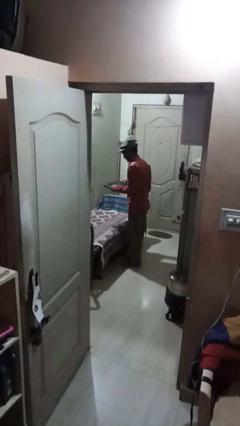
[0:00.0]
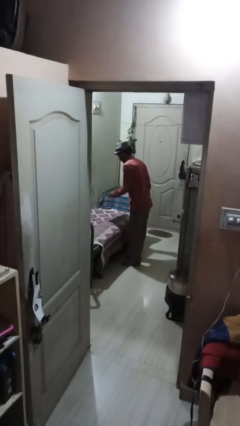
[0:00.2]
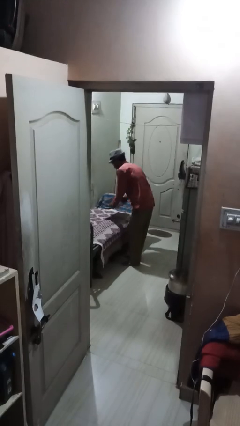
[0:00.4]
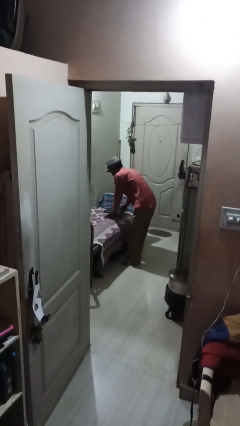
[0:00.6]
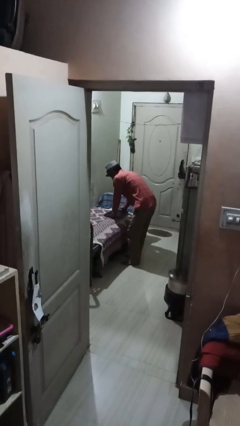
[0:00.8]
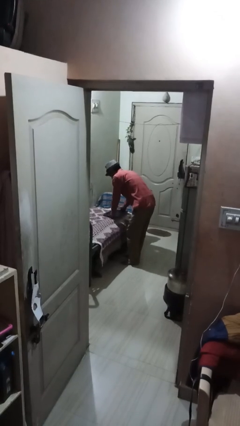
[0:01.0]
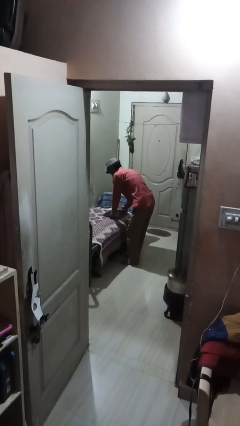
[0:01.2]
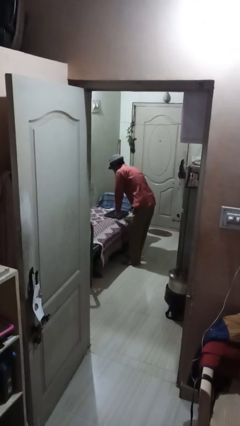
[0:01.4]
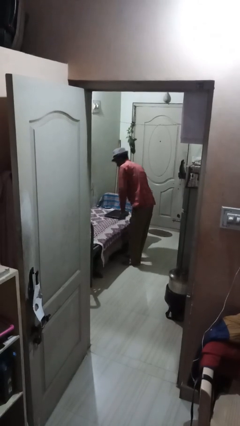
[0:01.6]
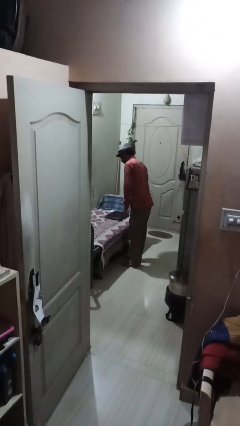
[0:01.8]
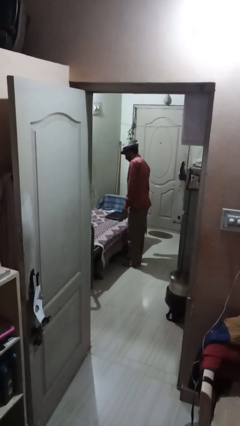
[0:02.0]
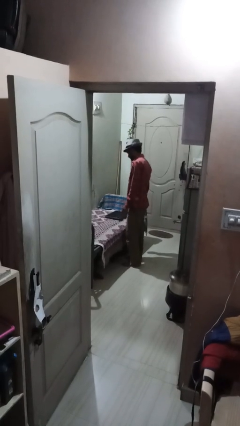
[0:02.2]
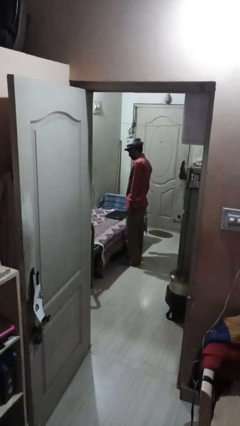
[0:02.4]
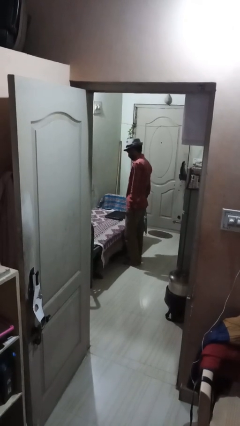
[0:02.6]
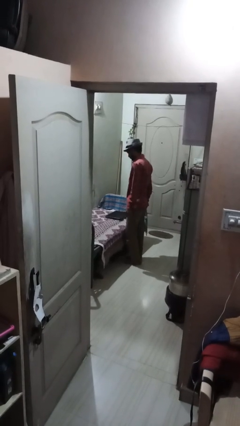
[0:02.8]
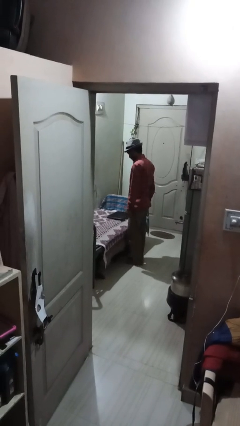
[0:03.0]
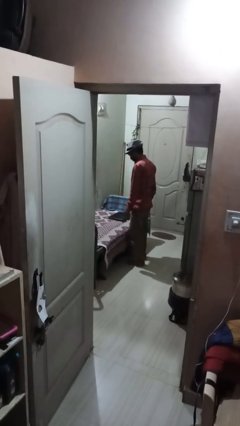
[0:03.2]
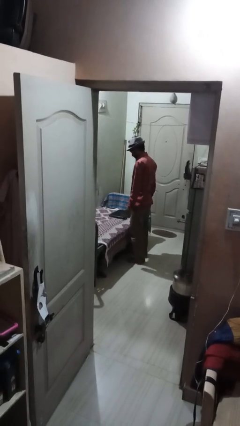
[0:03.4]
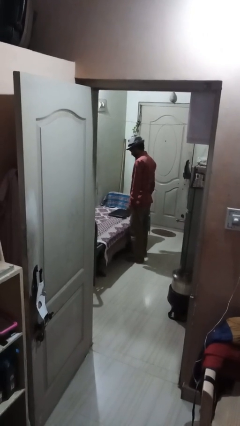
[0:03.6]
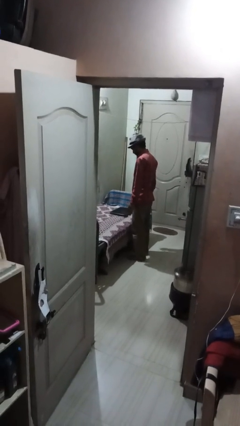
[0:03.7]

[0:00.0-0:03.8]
person puts down object on couch

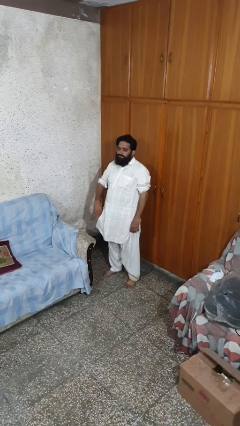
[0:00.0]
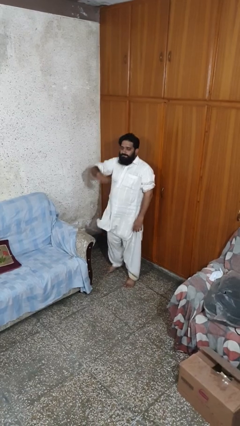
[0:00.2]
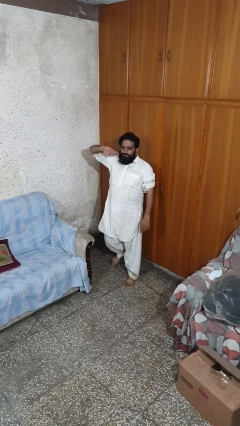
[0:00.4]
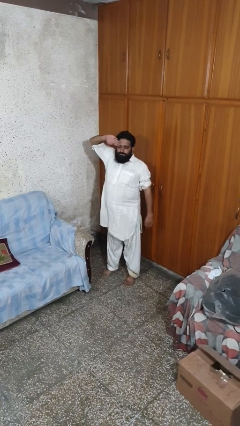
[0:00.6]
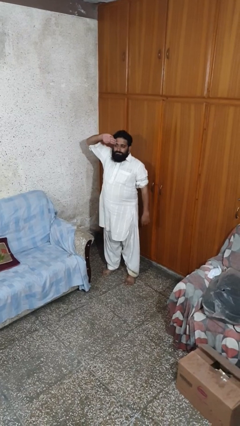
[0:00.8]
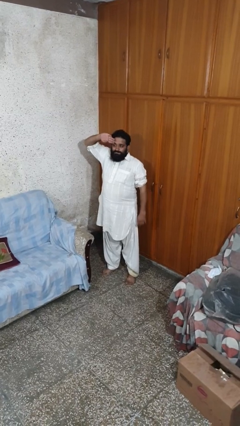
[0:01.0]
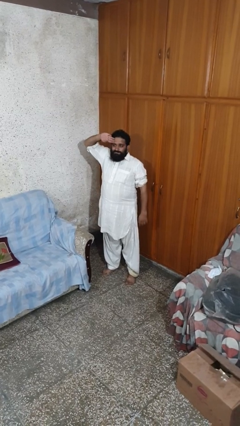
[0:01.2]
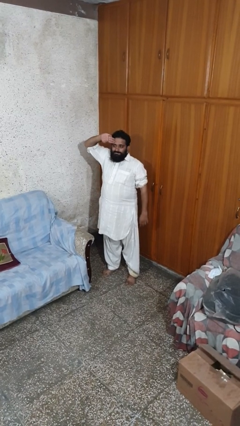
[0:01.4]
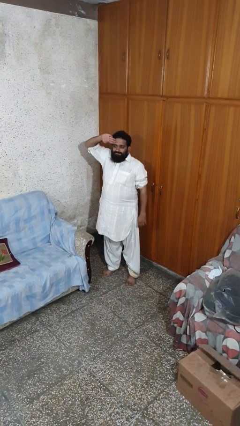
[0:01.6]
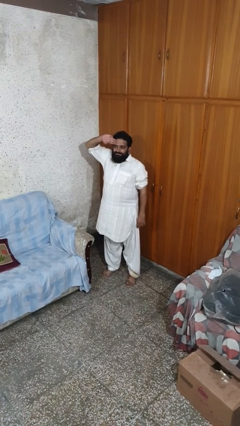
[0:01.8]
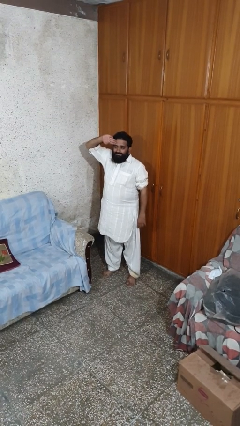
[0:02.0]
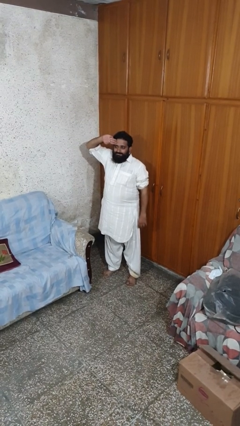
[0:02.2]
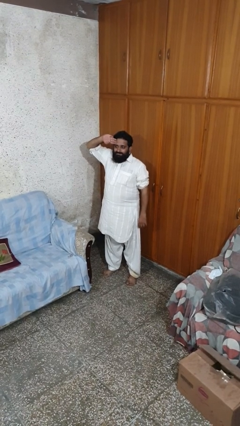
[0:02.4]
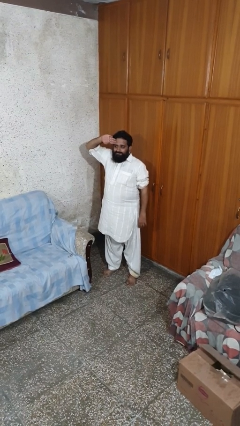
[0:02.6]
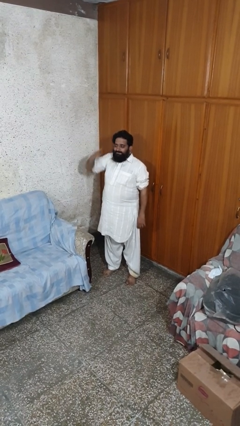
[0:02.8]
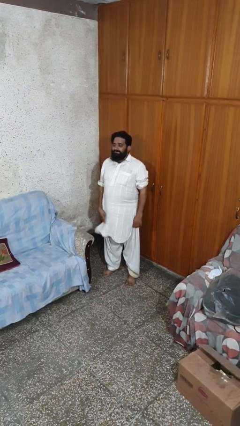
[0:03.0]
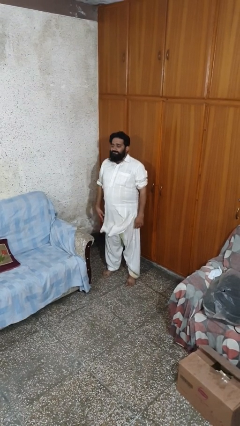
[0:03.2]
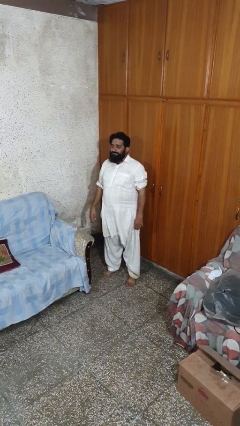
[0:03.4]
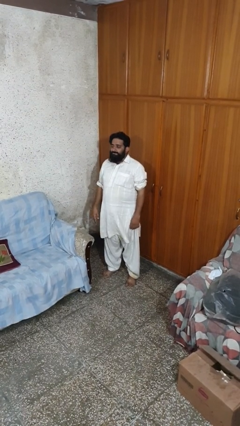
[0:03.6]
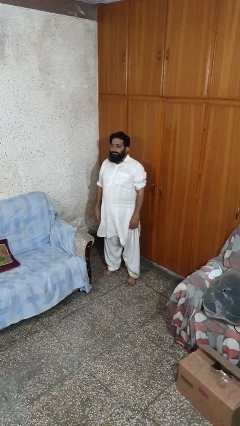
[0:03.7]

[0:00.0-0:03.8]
person salutes

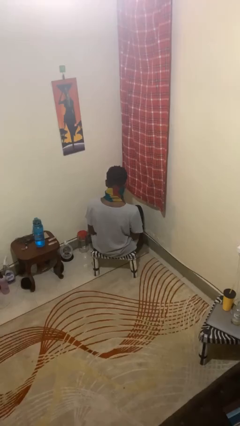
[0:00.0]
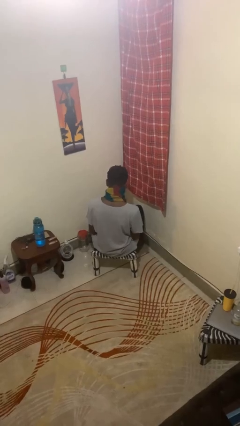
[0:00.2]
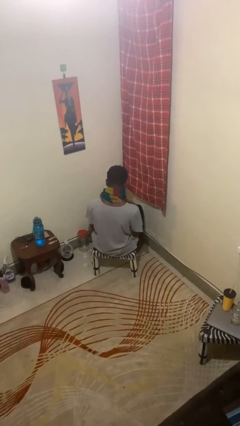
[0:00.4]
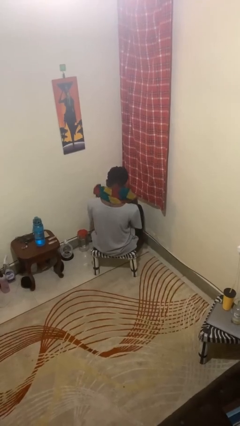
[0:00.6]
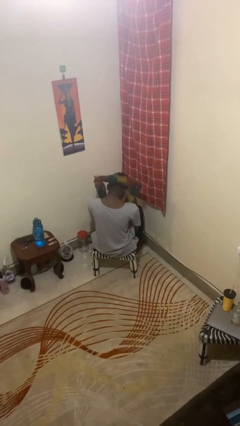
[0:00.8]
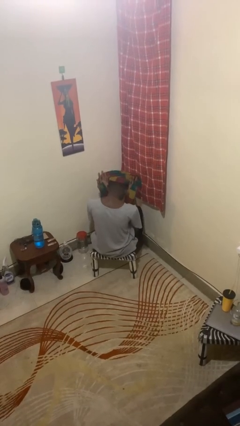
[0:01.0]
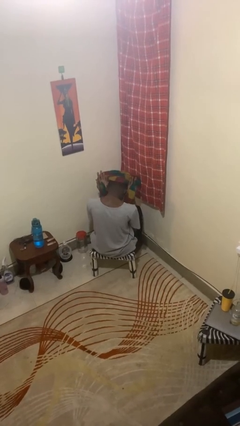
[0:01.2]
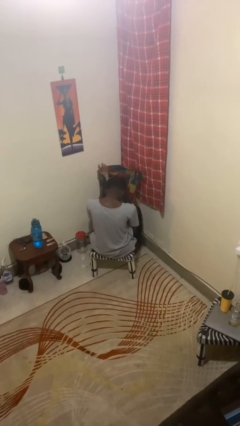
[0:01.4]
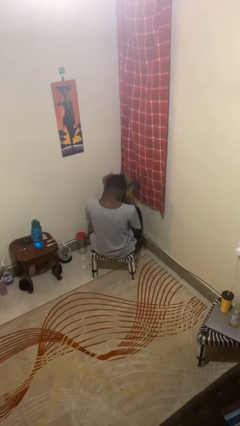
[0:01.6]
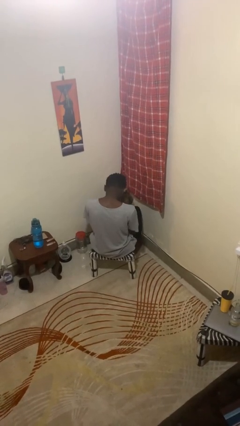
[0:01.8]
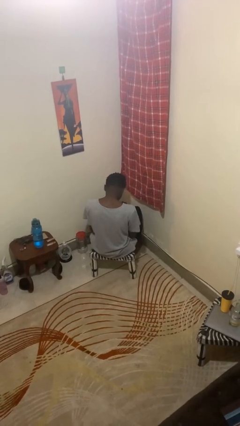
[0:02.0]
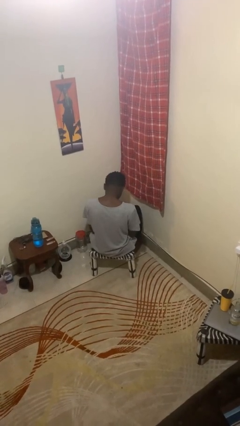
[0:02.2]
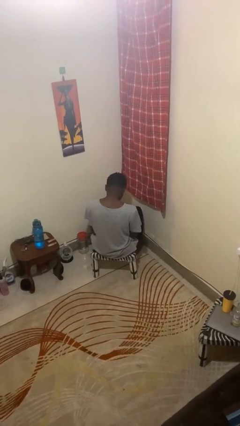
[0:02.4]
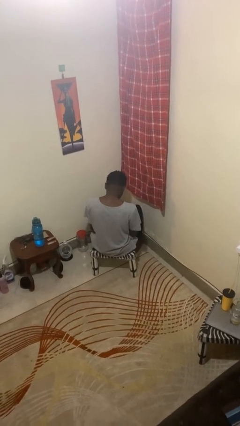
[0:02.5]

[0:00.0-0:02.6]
person takes off scarf

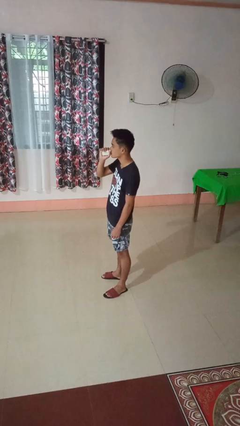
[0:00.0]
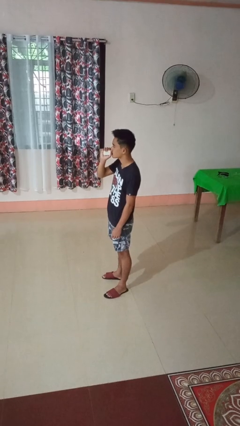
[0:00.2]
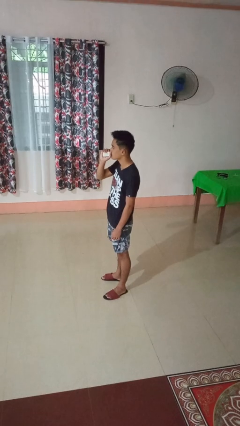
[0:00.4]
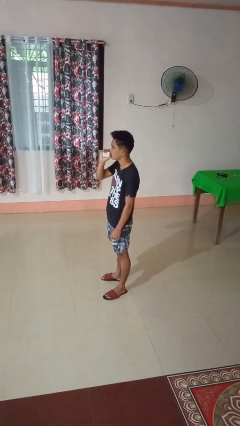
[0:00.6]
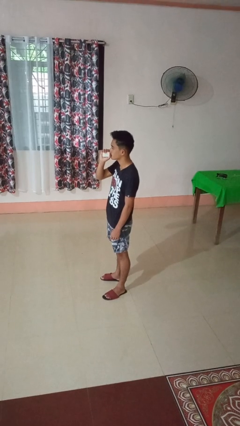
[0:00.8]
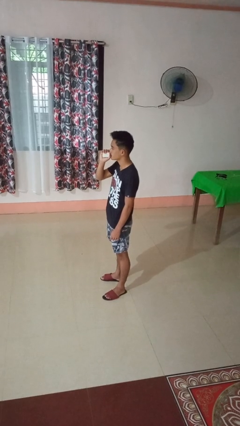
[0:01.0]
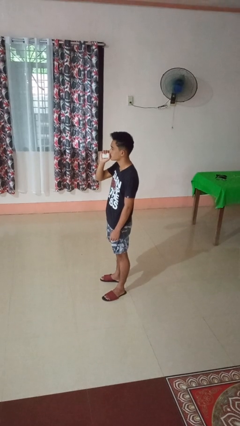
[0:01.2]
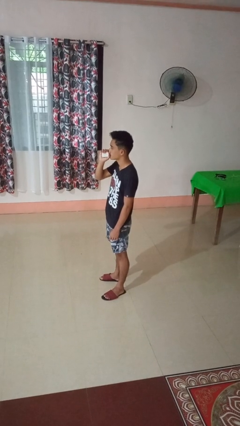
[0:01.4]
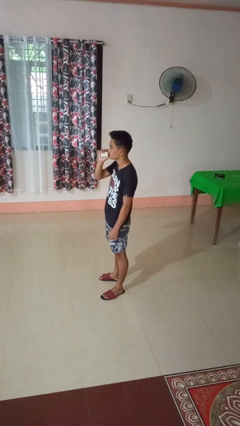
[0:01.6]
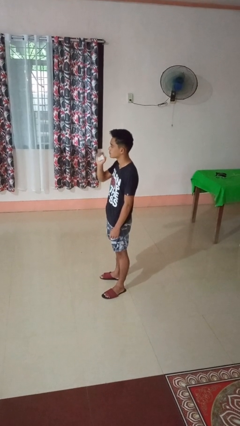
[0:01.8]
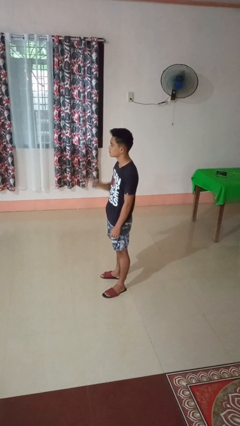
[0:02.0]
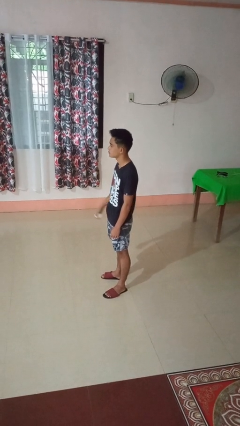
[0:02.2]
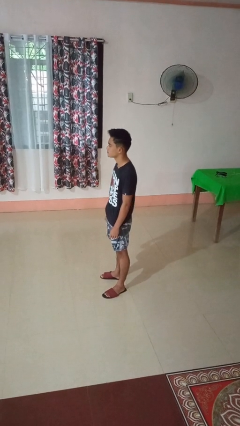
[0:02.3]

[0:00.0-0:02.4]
person vapes

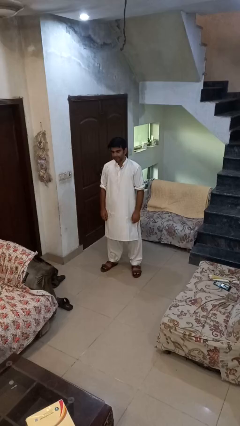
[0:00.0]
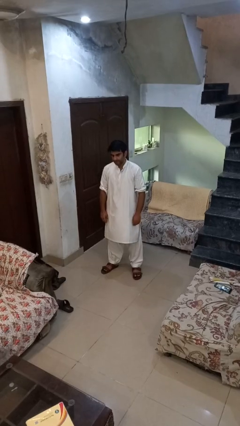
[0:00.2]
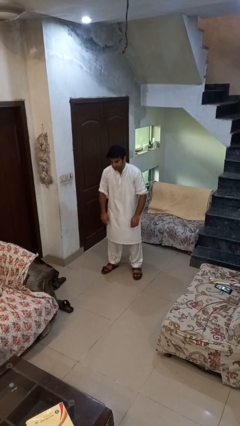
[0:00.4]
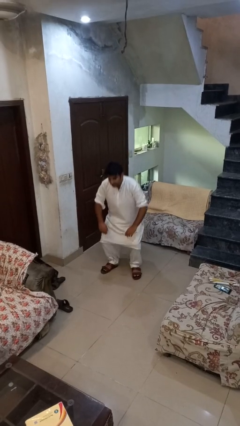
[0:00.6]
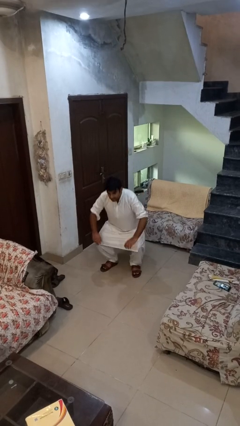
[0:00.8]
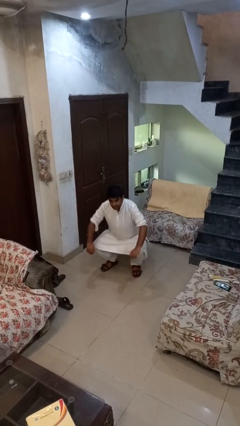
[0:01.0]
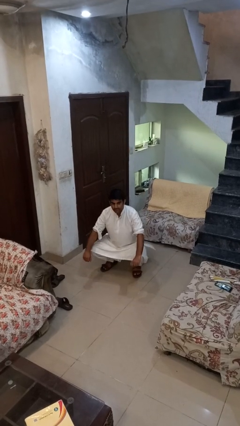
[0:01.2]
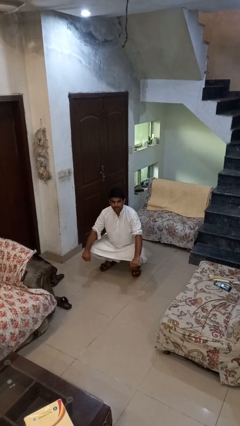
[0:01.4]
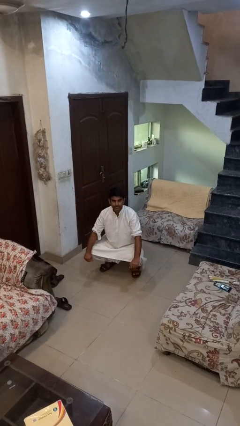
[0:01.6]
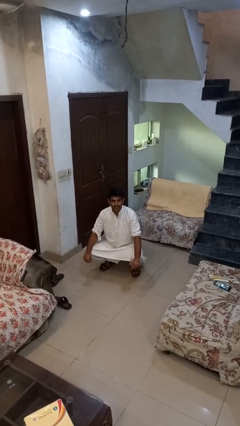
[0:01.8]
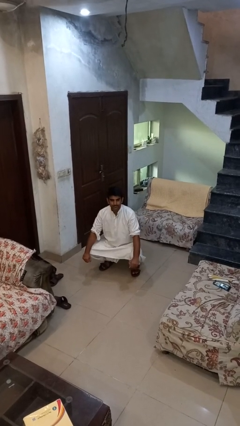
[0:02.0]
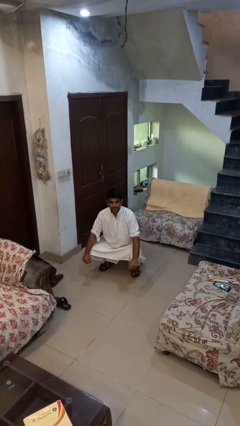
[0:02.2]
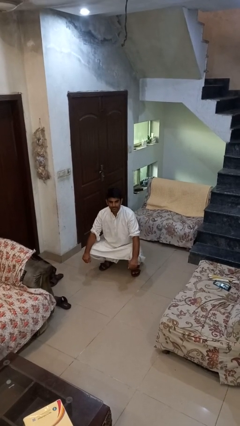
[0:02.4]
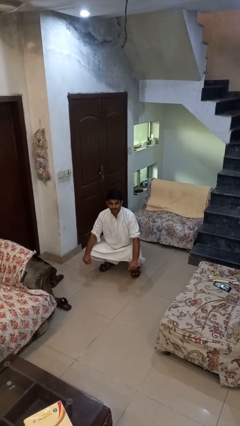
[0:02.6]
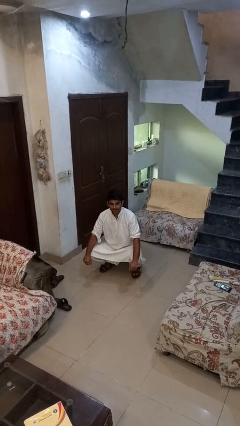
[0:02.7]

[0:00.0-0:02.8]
person squats

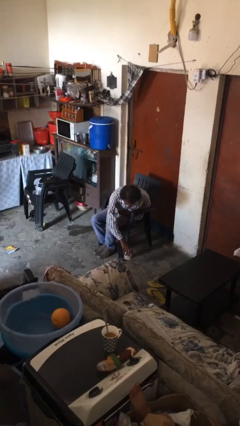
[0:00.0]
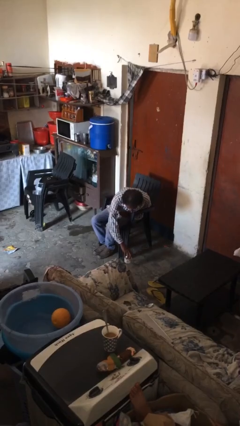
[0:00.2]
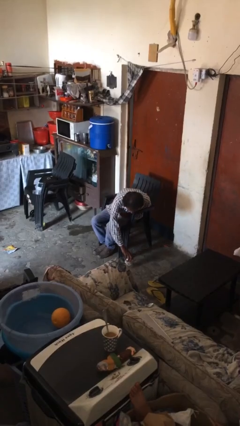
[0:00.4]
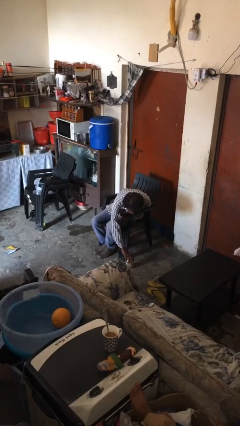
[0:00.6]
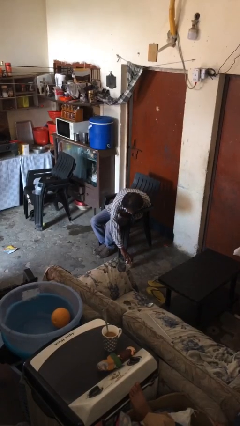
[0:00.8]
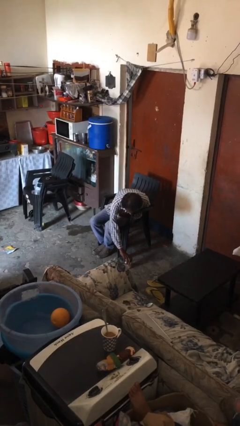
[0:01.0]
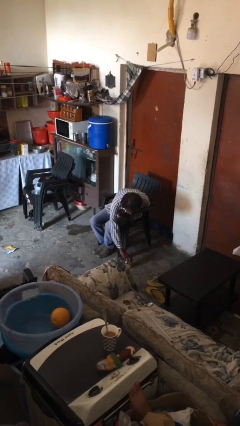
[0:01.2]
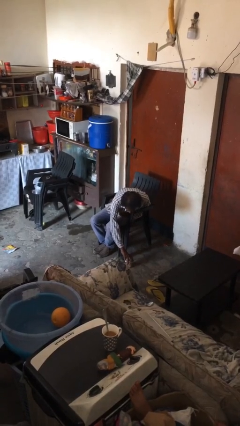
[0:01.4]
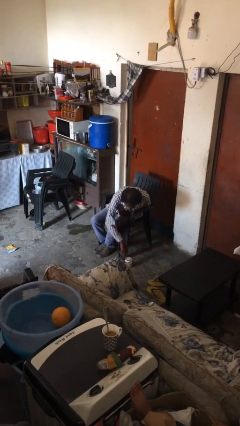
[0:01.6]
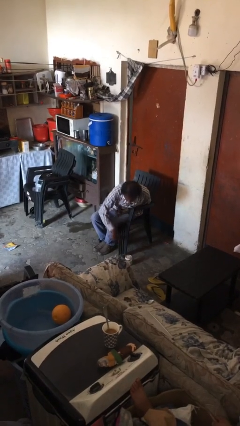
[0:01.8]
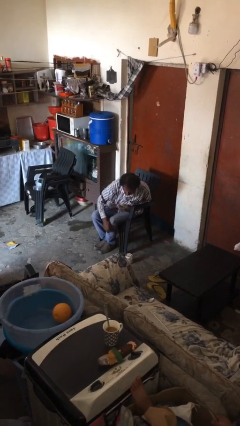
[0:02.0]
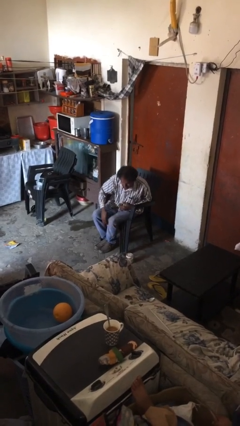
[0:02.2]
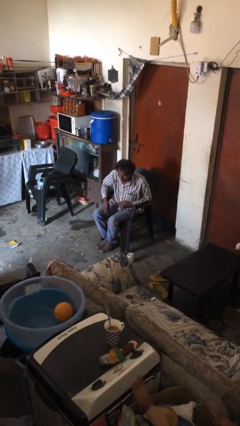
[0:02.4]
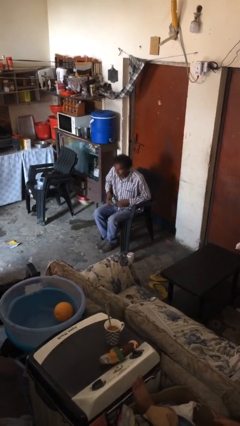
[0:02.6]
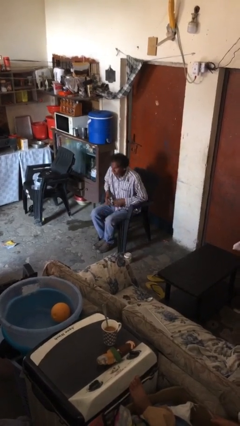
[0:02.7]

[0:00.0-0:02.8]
person puts down object on floor
